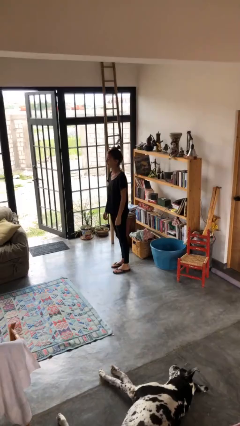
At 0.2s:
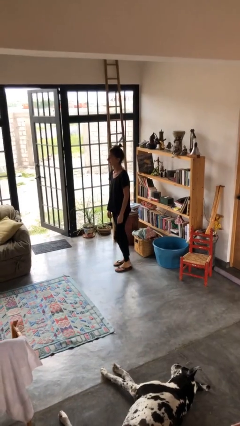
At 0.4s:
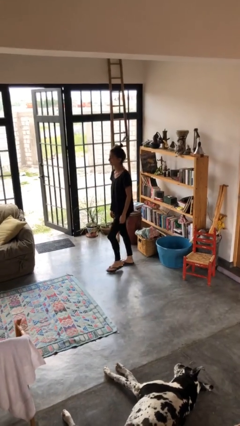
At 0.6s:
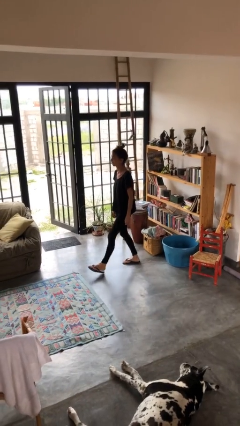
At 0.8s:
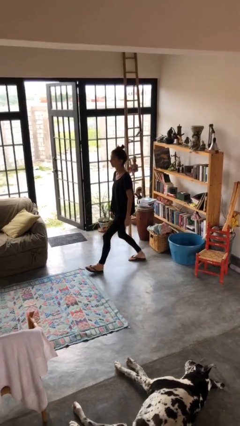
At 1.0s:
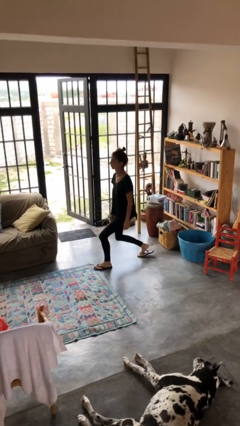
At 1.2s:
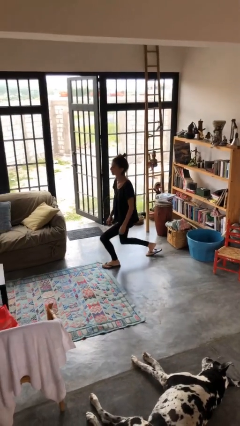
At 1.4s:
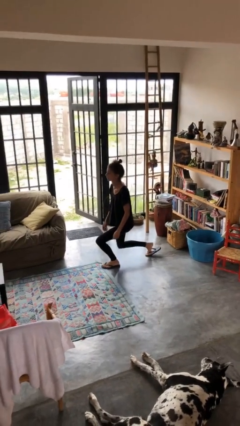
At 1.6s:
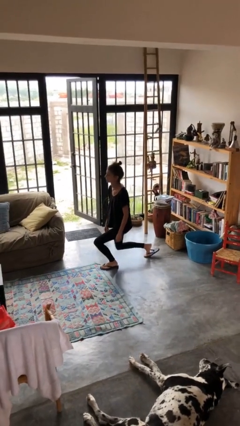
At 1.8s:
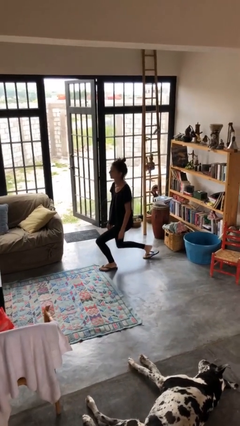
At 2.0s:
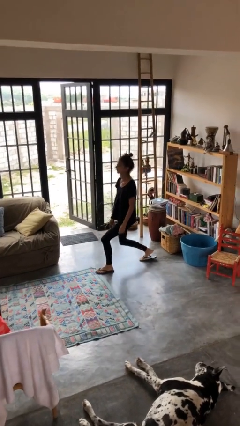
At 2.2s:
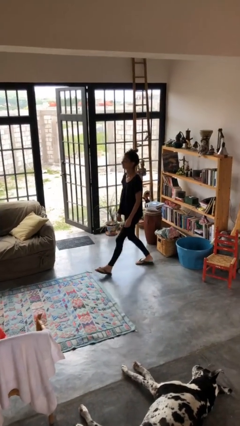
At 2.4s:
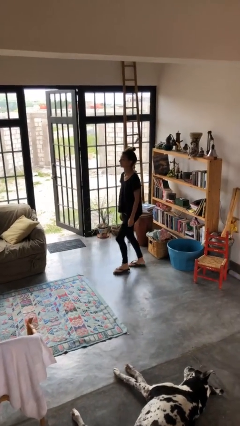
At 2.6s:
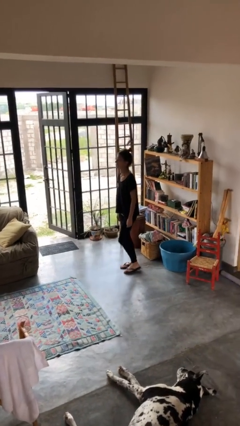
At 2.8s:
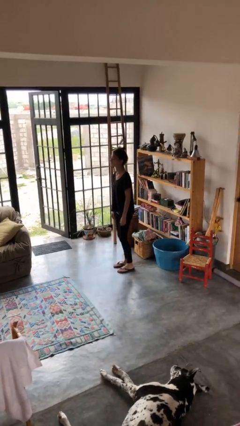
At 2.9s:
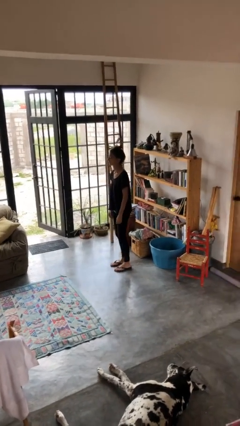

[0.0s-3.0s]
person exercises with lunges

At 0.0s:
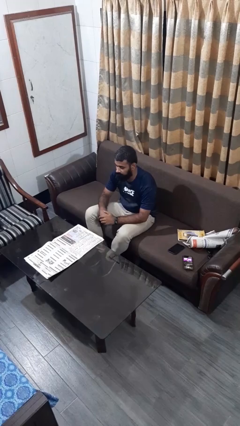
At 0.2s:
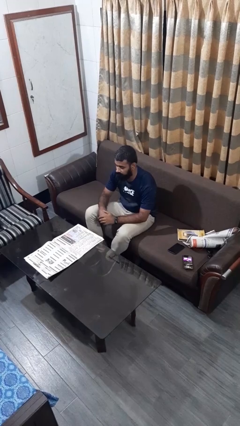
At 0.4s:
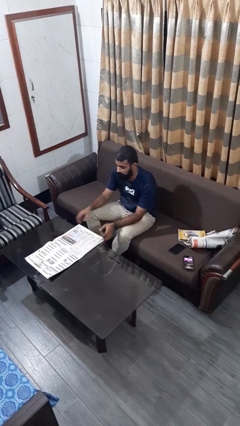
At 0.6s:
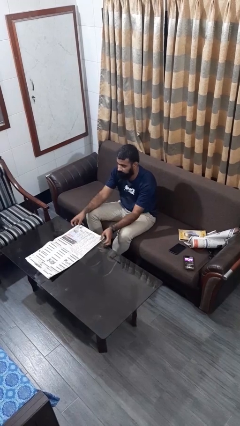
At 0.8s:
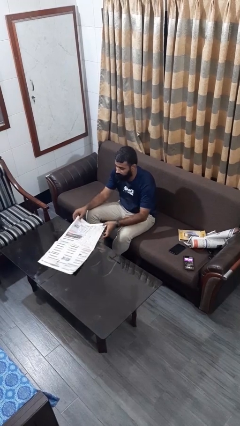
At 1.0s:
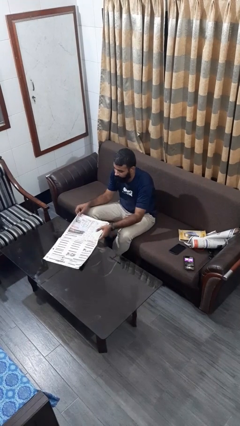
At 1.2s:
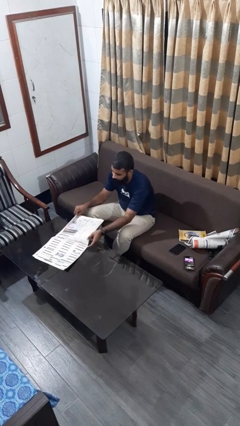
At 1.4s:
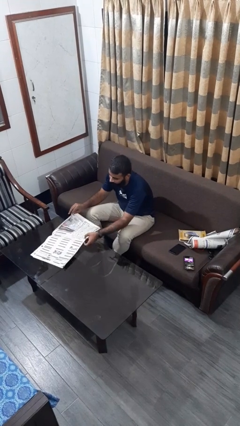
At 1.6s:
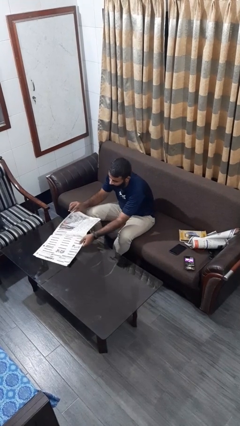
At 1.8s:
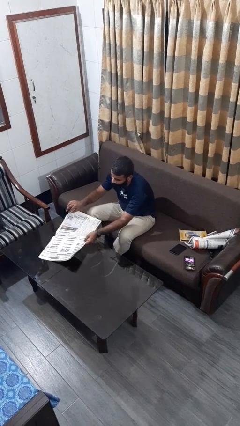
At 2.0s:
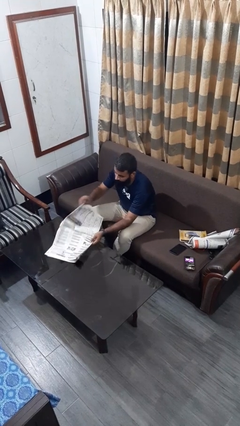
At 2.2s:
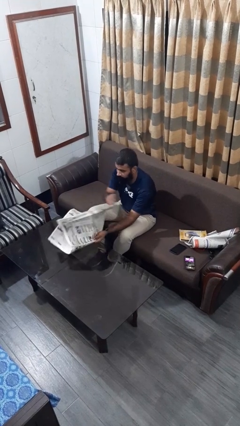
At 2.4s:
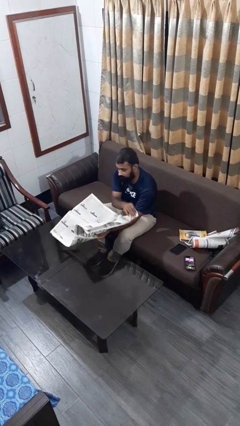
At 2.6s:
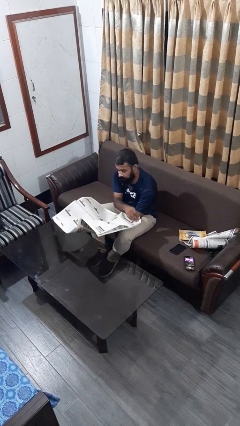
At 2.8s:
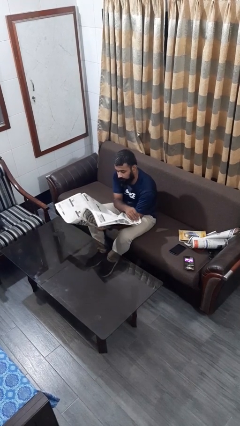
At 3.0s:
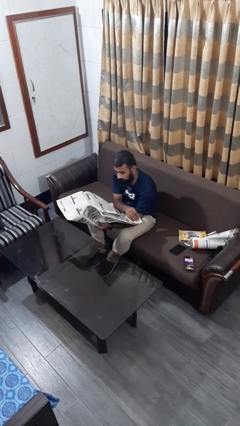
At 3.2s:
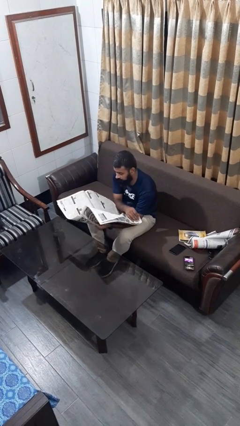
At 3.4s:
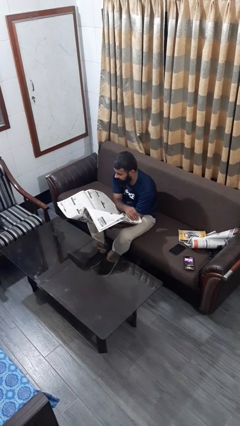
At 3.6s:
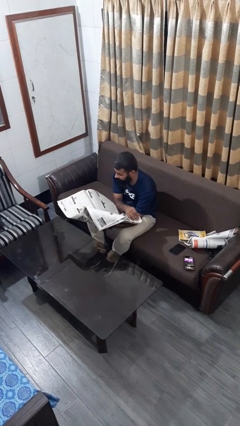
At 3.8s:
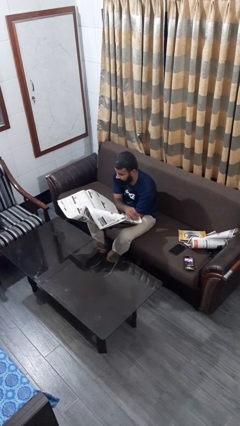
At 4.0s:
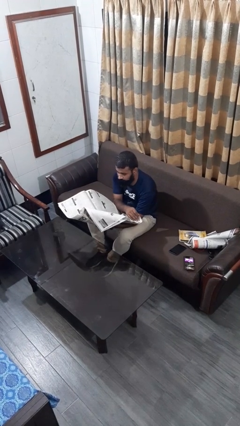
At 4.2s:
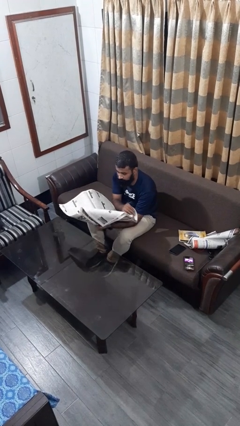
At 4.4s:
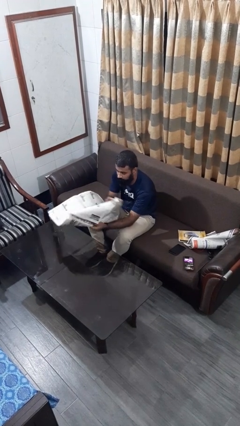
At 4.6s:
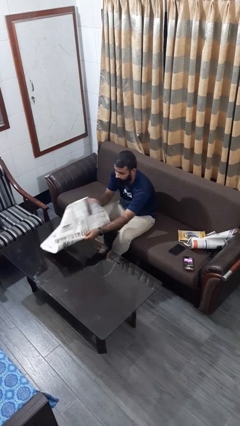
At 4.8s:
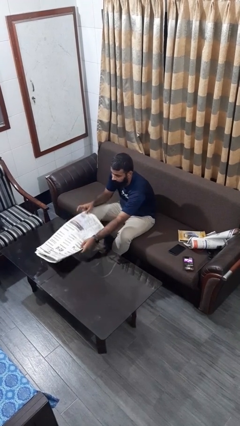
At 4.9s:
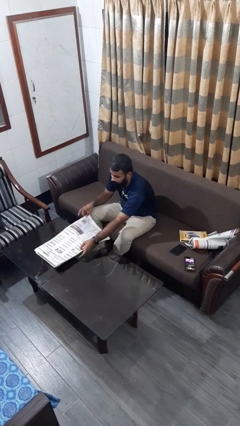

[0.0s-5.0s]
person reads newspaper

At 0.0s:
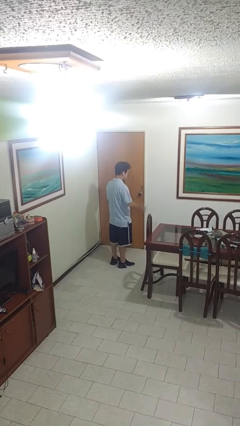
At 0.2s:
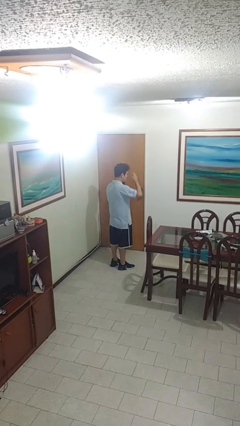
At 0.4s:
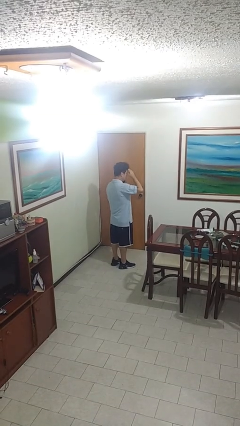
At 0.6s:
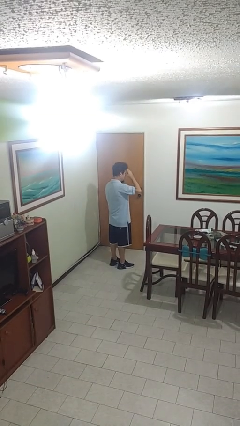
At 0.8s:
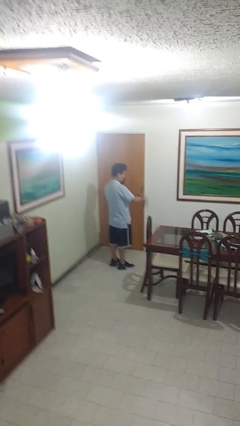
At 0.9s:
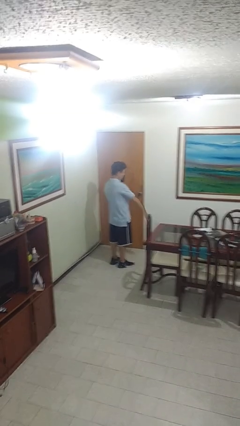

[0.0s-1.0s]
person salutes

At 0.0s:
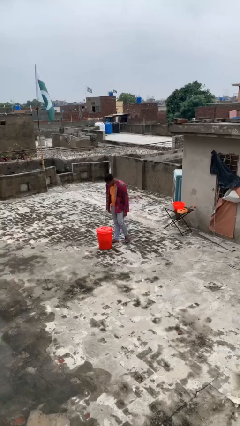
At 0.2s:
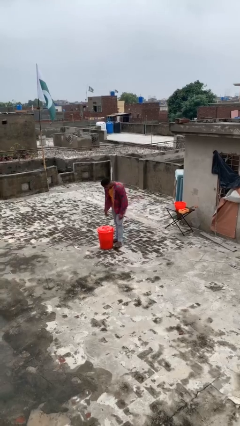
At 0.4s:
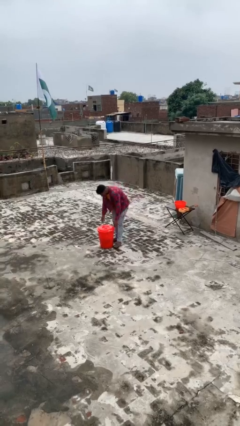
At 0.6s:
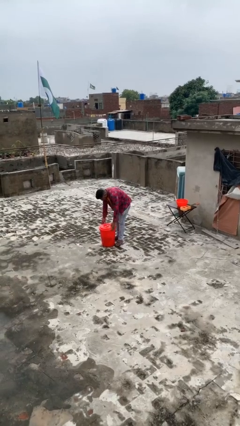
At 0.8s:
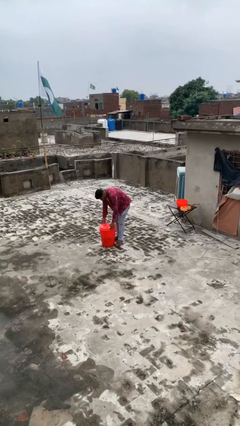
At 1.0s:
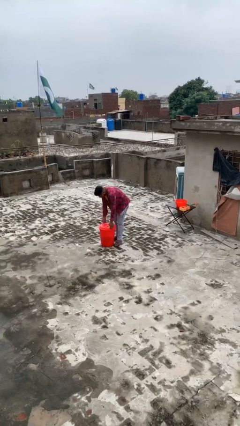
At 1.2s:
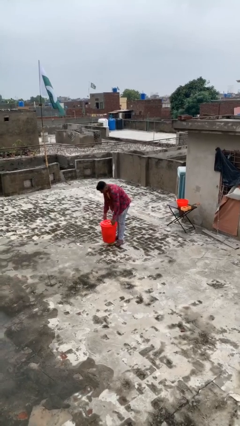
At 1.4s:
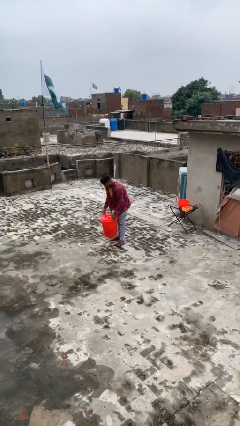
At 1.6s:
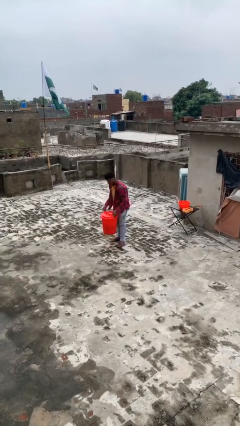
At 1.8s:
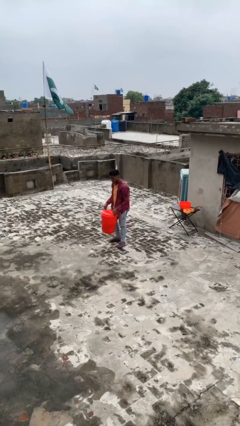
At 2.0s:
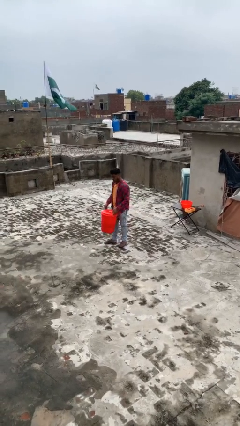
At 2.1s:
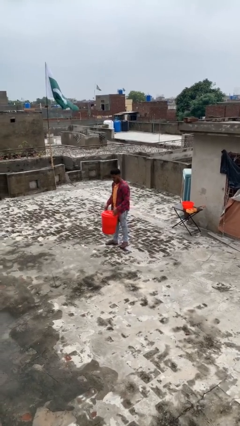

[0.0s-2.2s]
person picks up object from floor

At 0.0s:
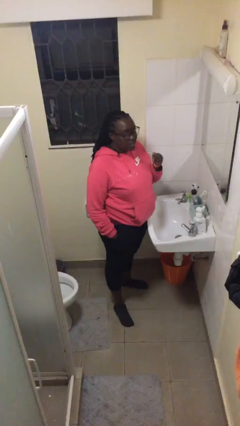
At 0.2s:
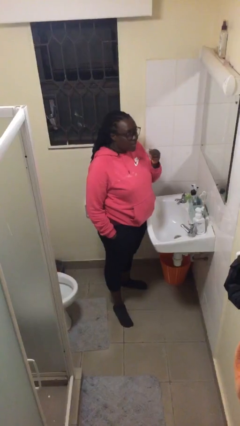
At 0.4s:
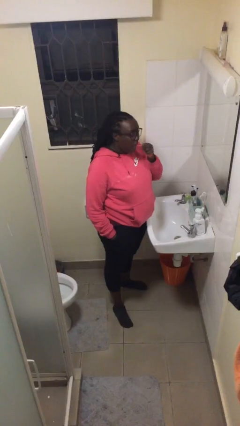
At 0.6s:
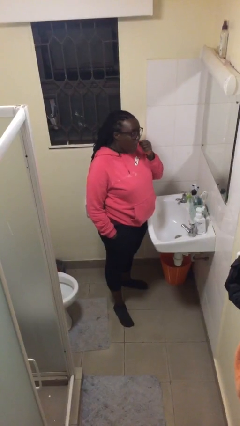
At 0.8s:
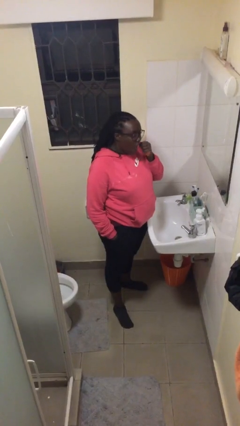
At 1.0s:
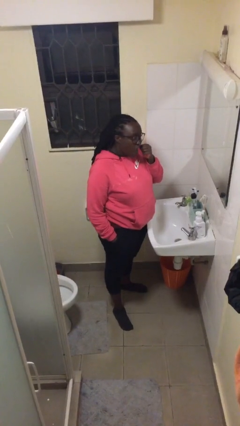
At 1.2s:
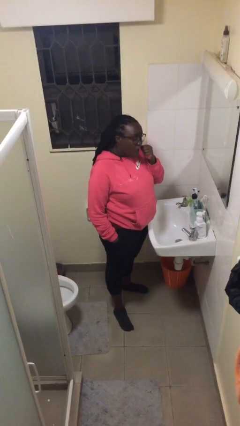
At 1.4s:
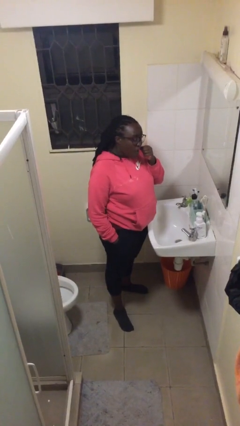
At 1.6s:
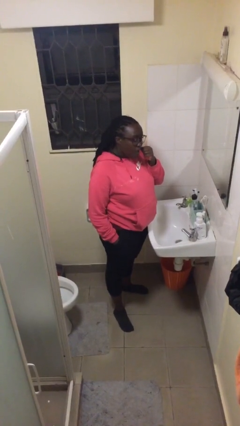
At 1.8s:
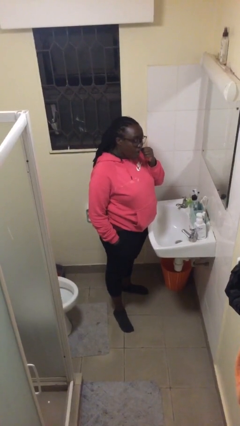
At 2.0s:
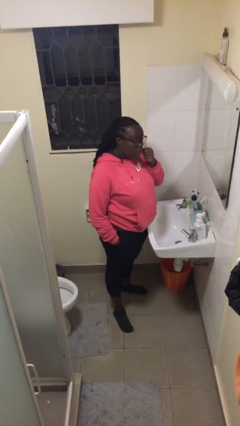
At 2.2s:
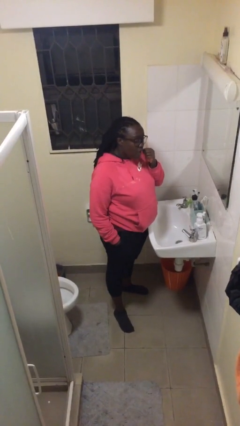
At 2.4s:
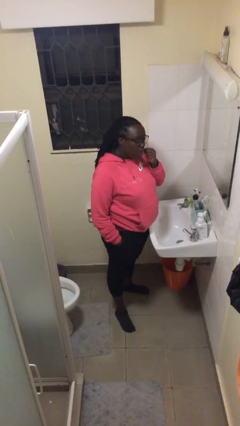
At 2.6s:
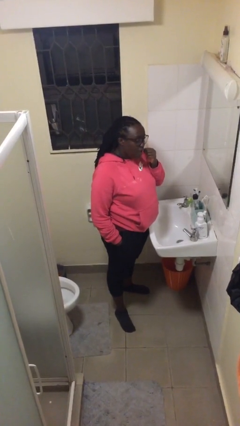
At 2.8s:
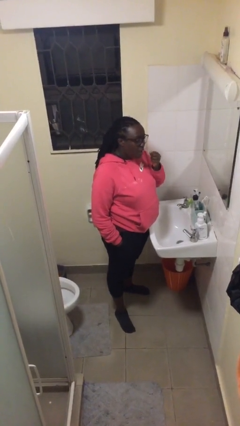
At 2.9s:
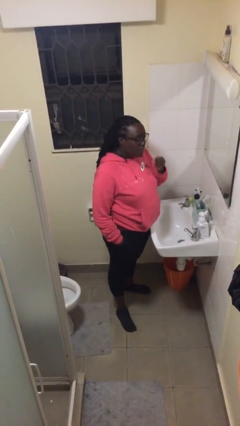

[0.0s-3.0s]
person flosses

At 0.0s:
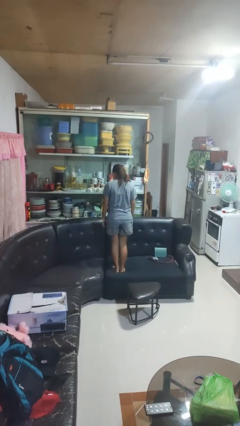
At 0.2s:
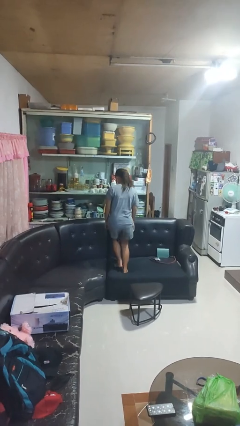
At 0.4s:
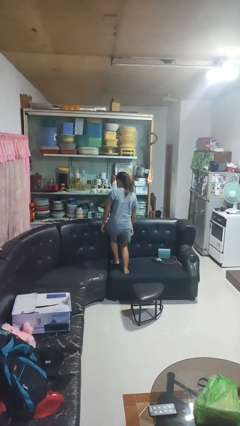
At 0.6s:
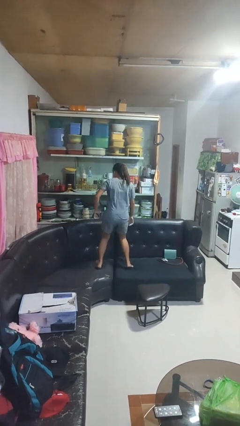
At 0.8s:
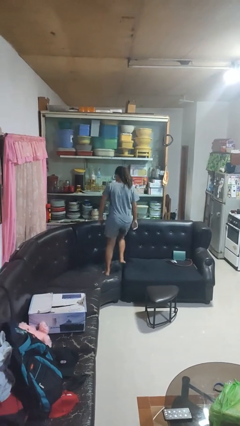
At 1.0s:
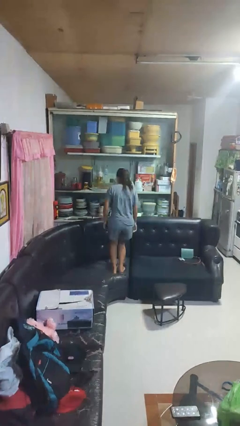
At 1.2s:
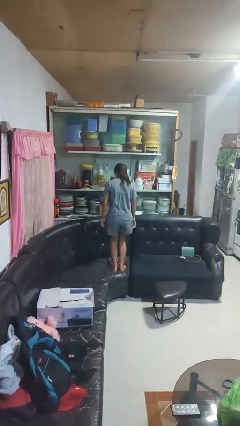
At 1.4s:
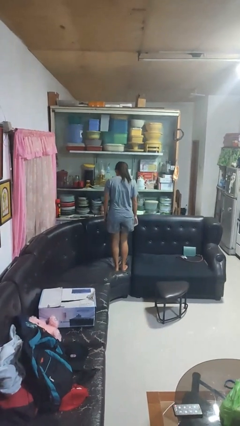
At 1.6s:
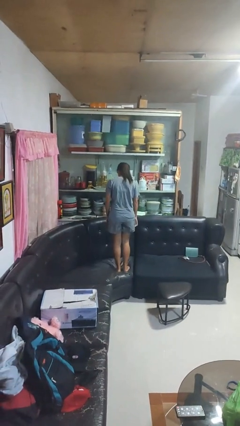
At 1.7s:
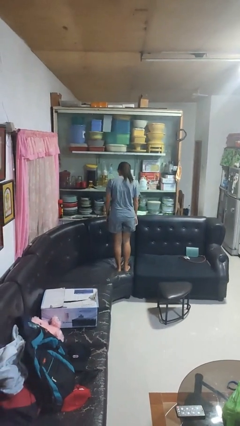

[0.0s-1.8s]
person jumps on couch

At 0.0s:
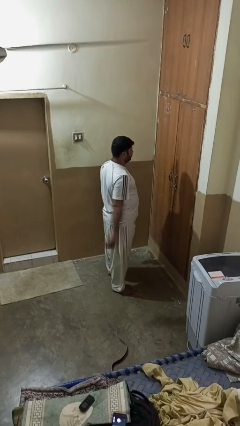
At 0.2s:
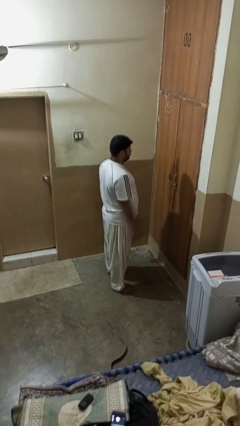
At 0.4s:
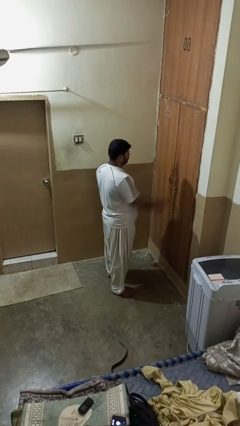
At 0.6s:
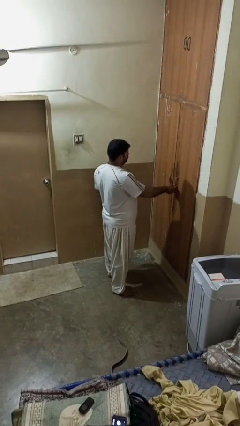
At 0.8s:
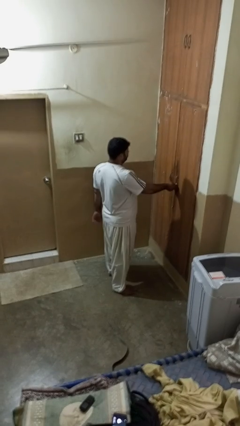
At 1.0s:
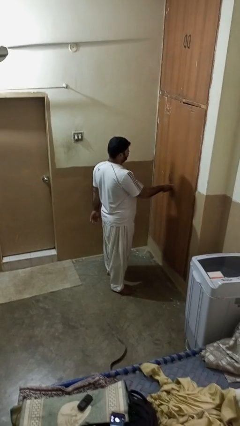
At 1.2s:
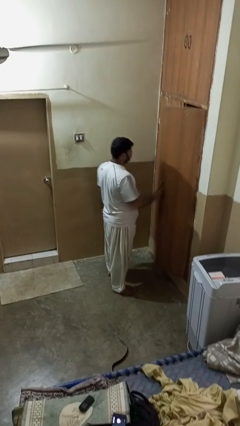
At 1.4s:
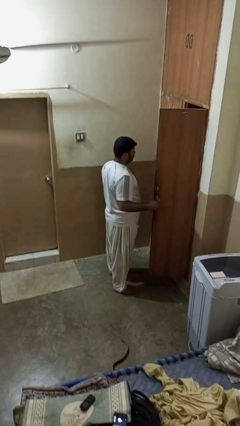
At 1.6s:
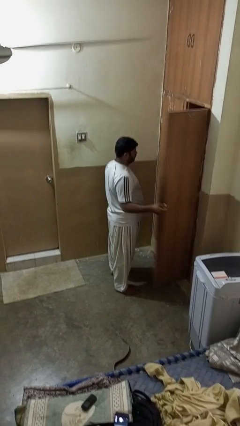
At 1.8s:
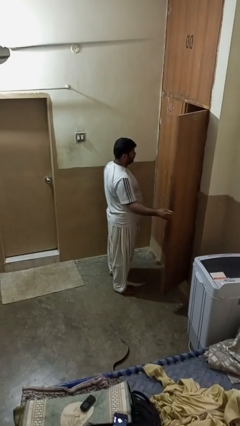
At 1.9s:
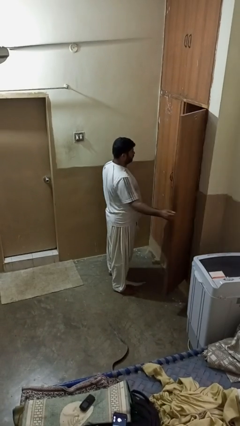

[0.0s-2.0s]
person opens closet door
